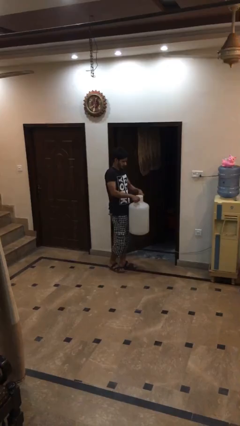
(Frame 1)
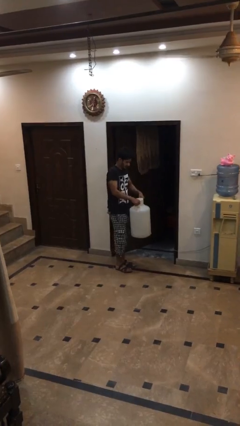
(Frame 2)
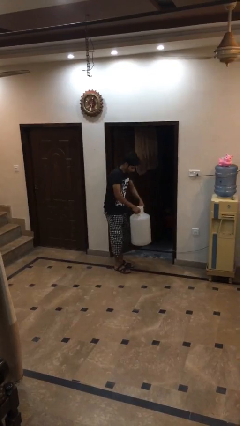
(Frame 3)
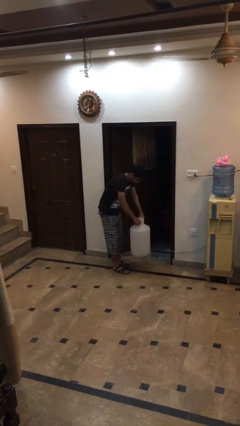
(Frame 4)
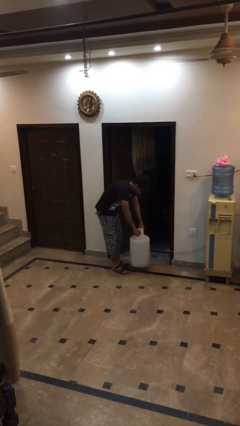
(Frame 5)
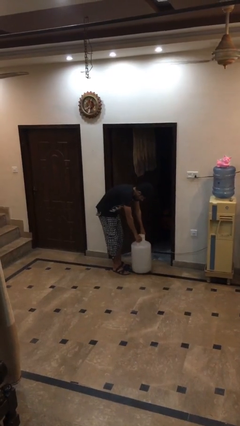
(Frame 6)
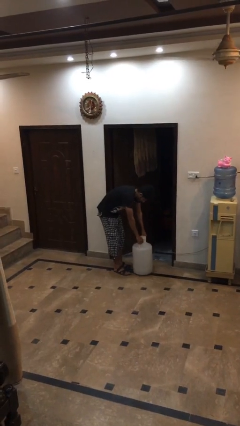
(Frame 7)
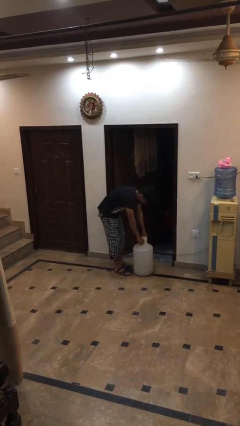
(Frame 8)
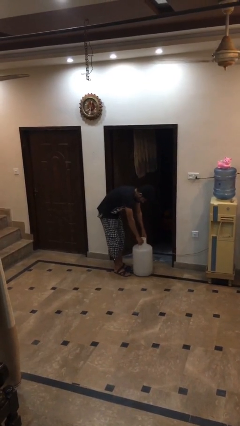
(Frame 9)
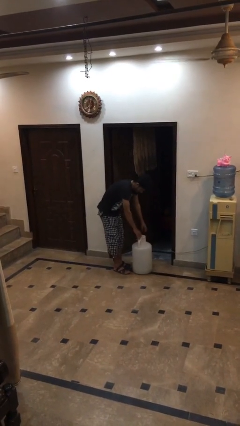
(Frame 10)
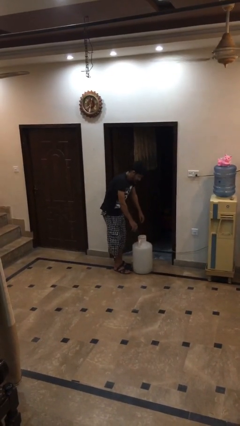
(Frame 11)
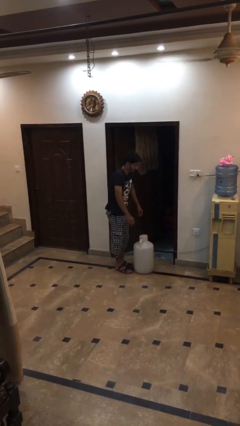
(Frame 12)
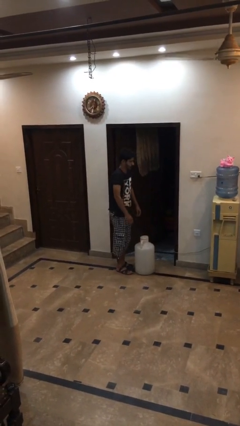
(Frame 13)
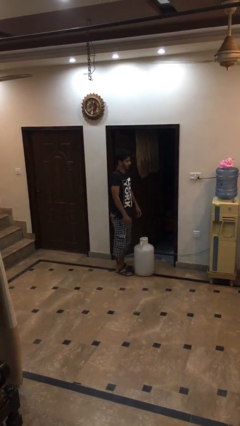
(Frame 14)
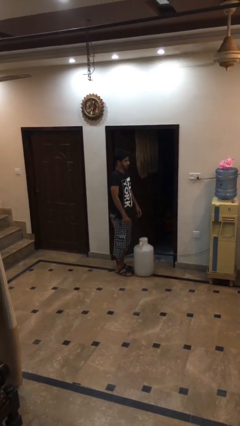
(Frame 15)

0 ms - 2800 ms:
person puts down object on floor

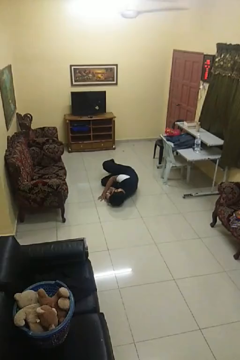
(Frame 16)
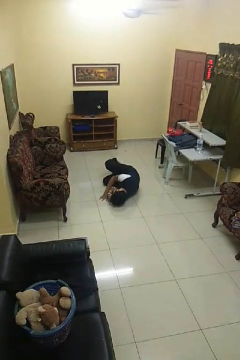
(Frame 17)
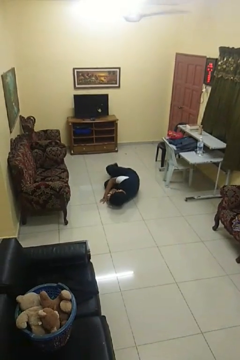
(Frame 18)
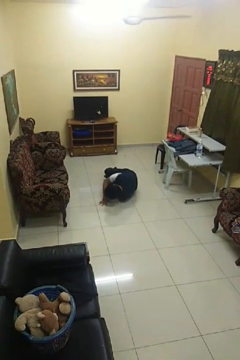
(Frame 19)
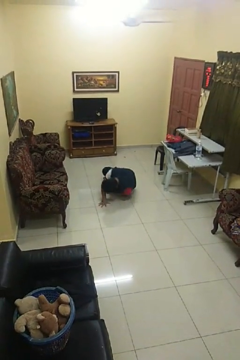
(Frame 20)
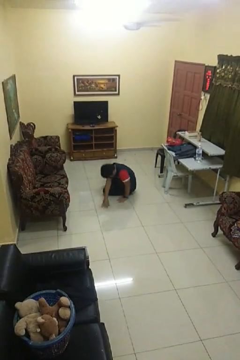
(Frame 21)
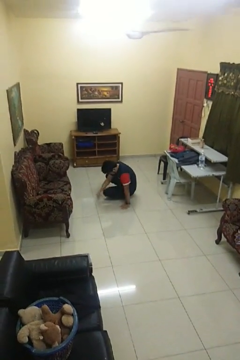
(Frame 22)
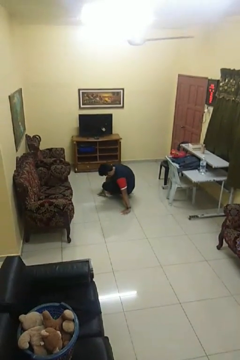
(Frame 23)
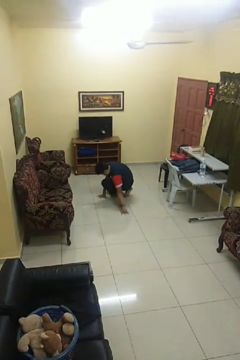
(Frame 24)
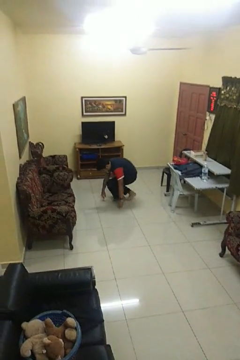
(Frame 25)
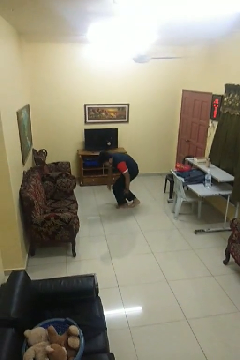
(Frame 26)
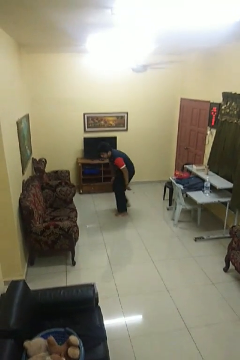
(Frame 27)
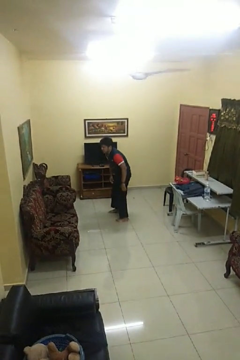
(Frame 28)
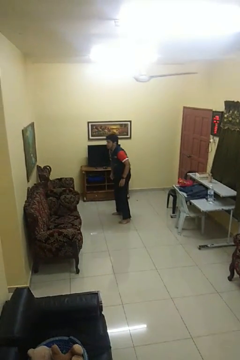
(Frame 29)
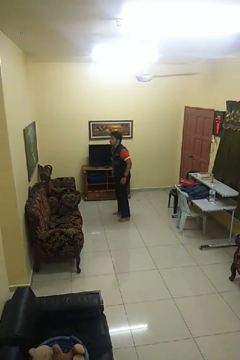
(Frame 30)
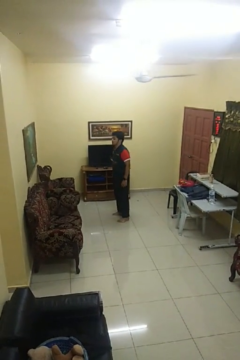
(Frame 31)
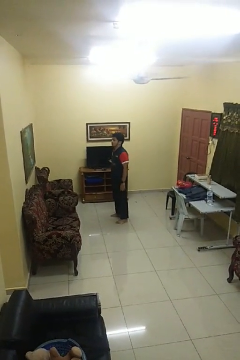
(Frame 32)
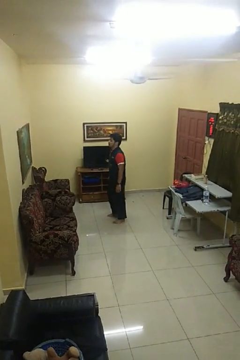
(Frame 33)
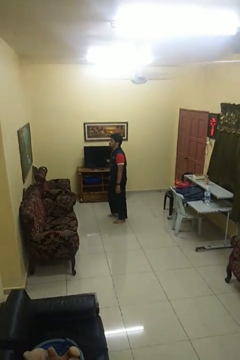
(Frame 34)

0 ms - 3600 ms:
person stands up from floor

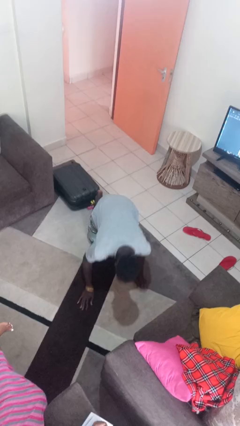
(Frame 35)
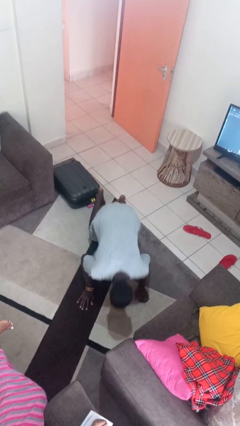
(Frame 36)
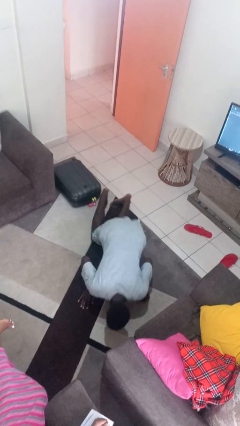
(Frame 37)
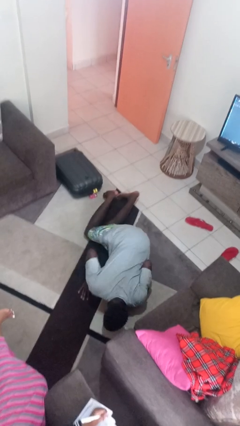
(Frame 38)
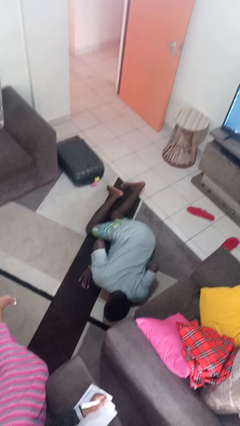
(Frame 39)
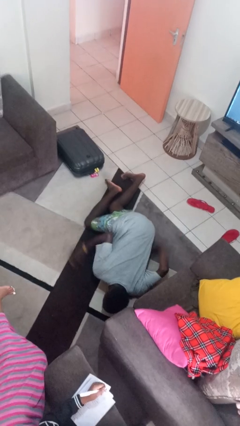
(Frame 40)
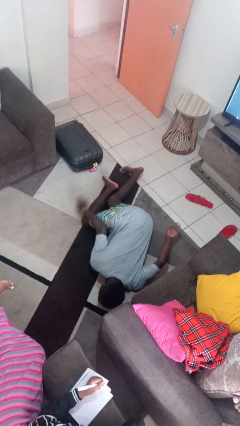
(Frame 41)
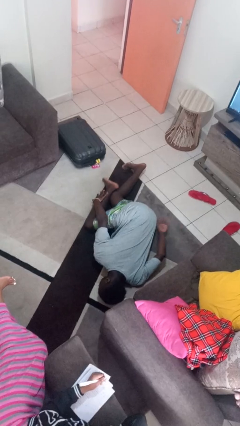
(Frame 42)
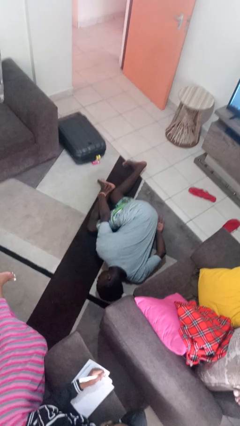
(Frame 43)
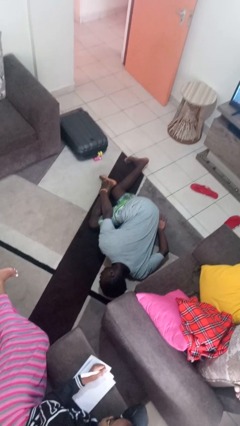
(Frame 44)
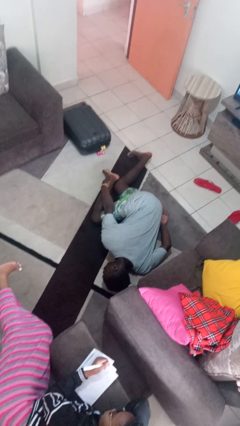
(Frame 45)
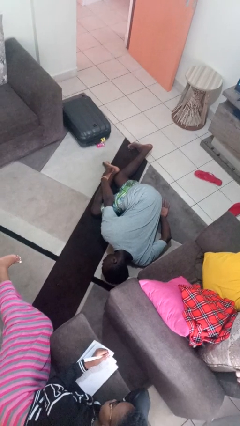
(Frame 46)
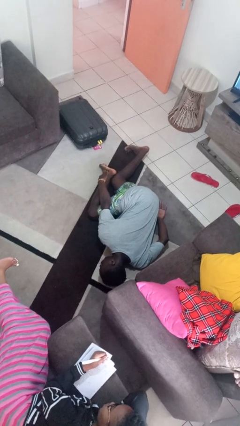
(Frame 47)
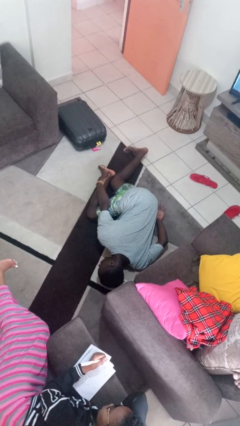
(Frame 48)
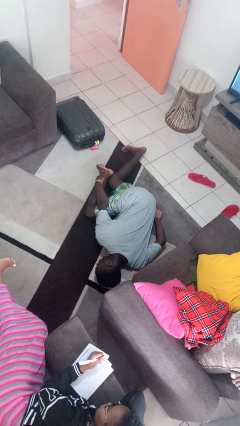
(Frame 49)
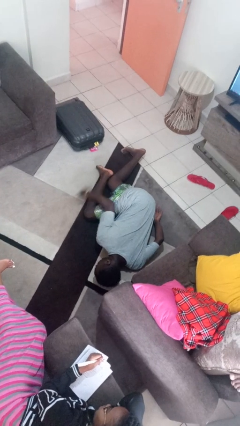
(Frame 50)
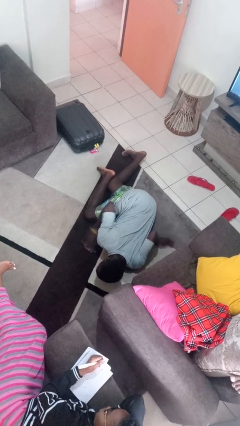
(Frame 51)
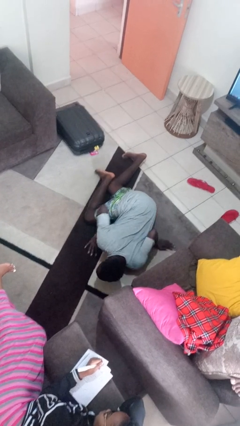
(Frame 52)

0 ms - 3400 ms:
person lies down on floor

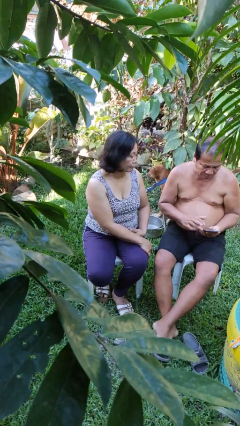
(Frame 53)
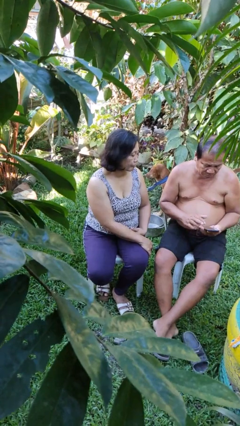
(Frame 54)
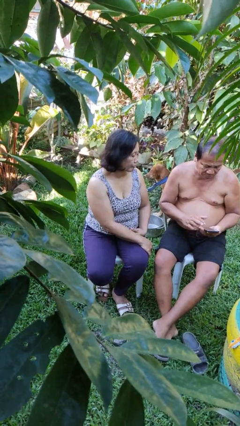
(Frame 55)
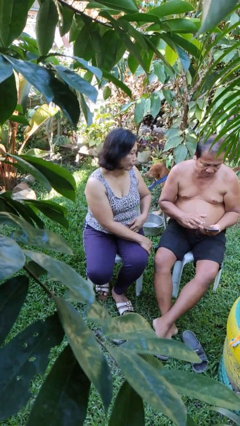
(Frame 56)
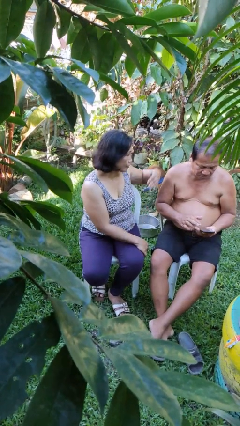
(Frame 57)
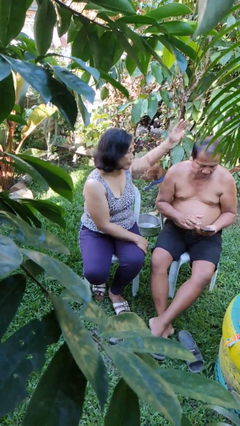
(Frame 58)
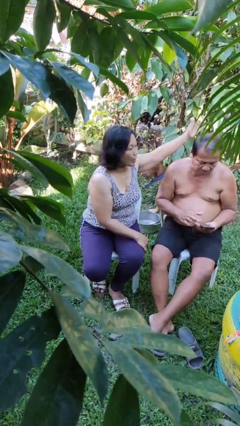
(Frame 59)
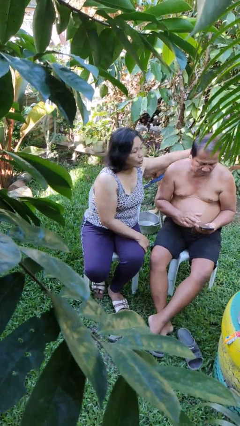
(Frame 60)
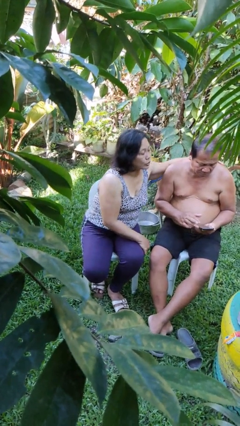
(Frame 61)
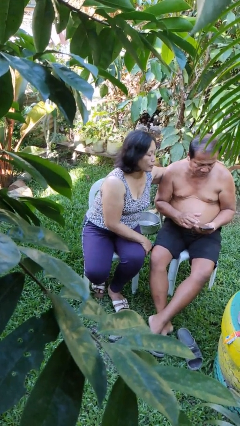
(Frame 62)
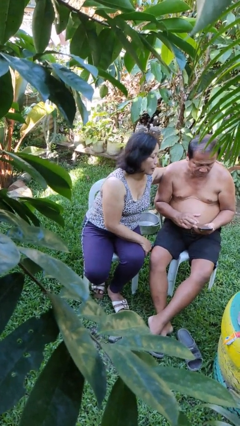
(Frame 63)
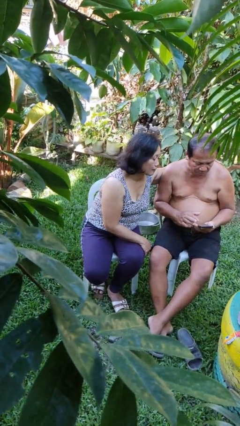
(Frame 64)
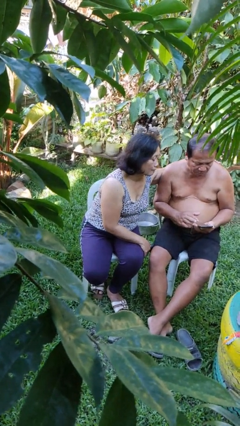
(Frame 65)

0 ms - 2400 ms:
person touches back of person

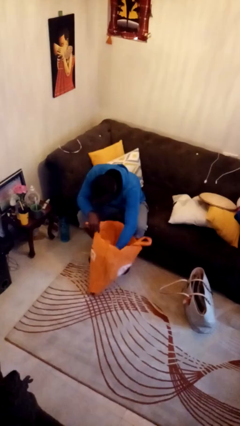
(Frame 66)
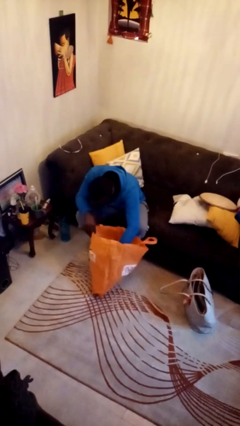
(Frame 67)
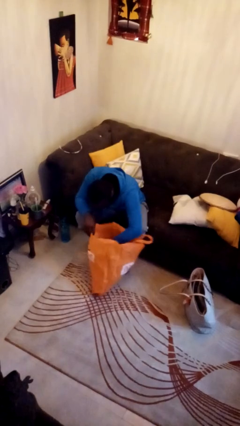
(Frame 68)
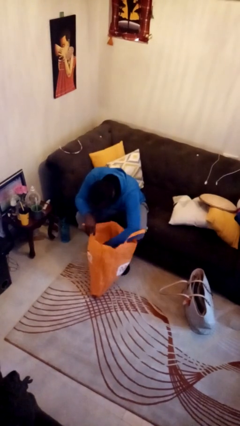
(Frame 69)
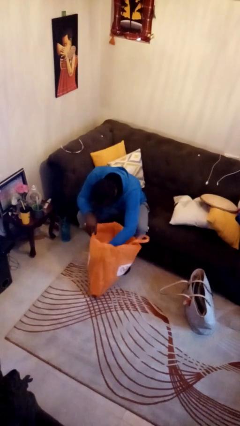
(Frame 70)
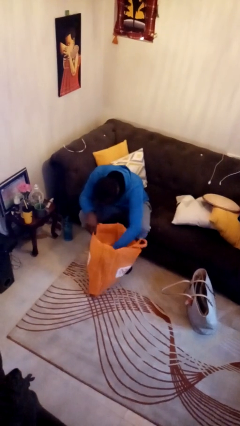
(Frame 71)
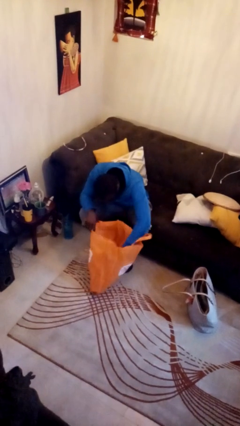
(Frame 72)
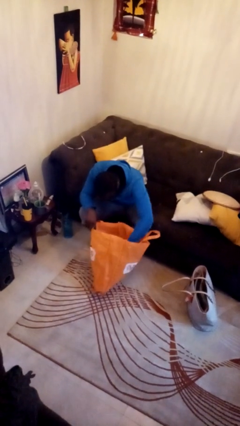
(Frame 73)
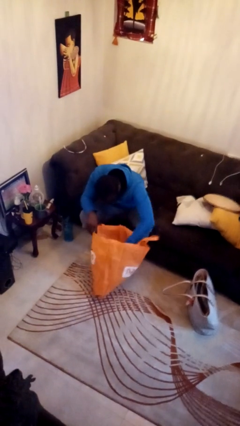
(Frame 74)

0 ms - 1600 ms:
person searches in bag

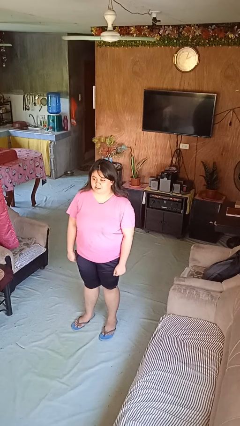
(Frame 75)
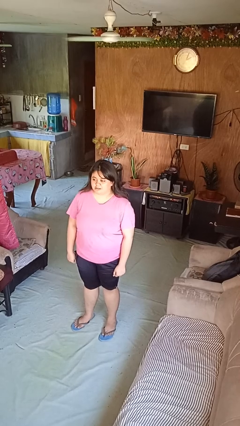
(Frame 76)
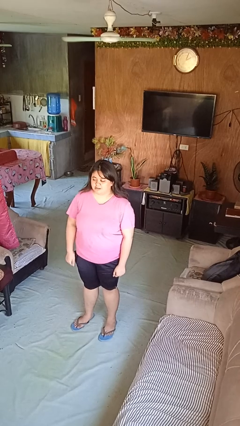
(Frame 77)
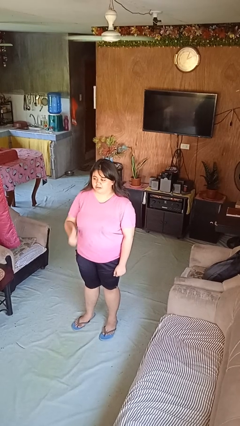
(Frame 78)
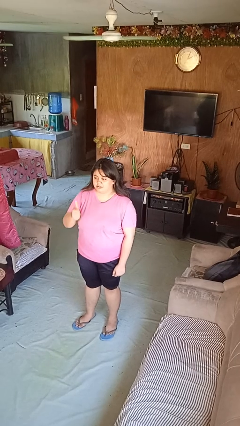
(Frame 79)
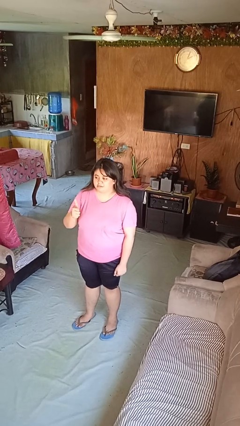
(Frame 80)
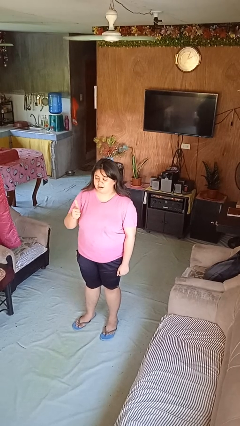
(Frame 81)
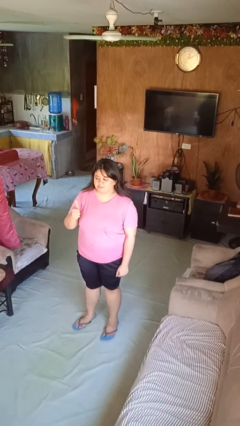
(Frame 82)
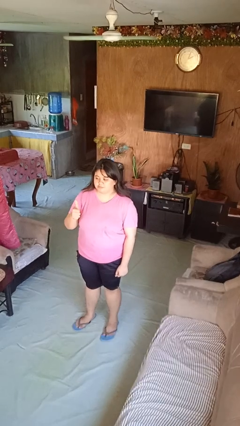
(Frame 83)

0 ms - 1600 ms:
person gestures thumbs up

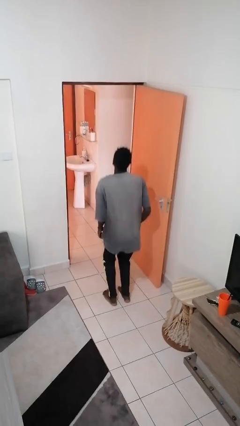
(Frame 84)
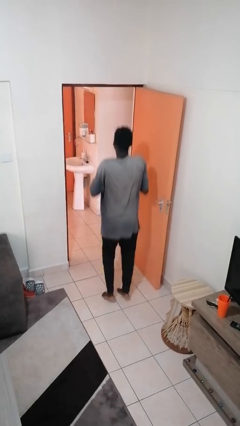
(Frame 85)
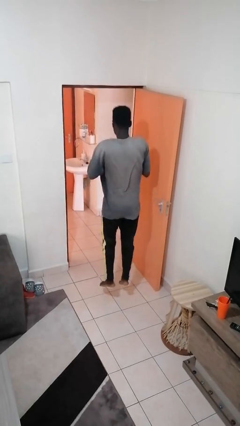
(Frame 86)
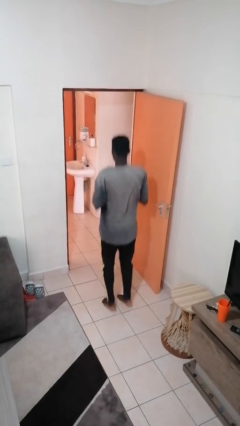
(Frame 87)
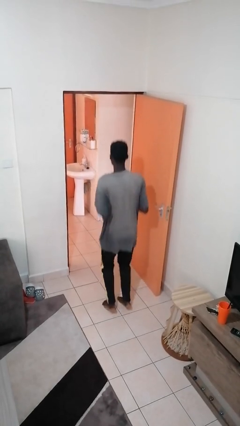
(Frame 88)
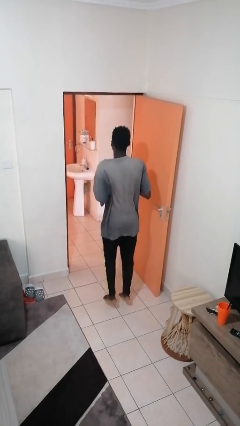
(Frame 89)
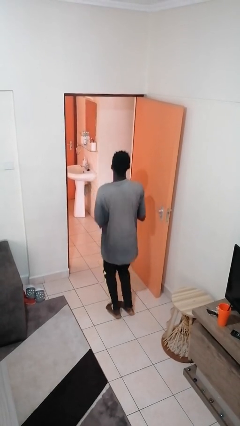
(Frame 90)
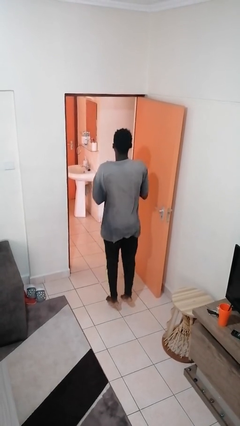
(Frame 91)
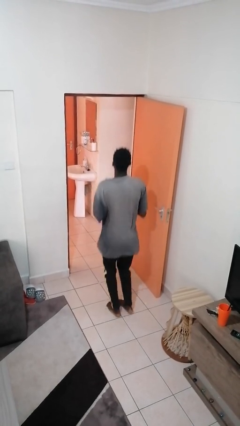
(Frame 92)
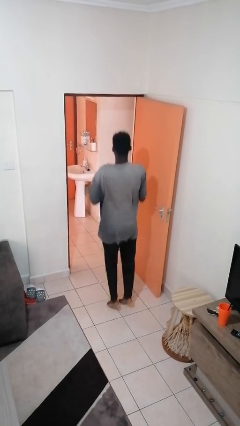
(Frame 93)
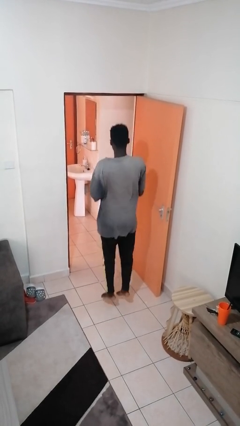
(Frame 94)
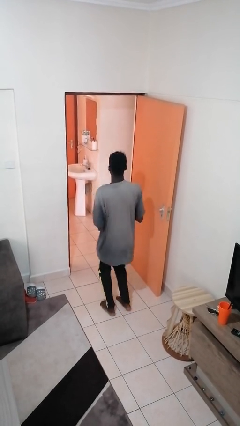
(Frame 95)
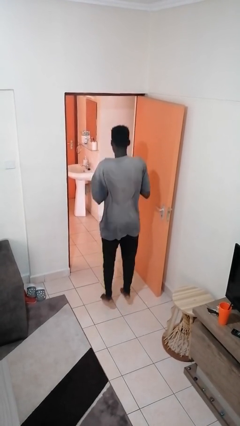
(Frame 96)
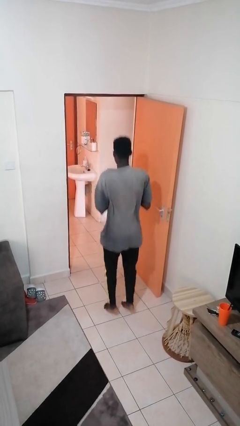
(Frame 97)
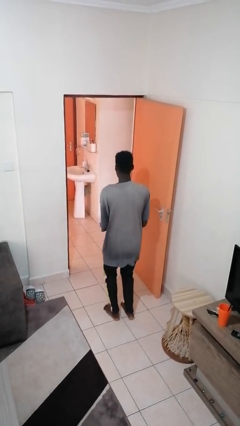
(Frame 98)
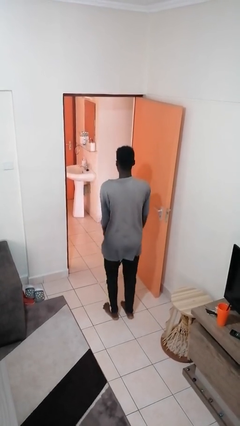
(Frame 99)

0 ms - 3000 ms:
person jumps
